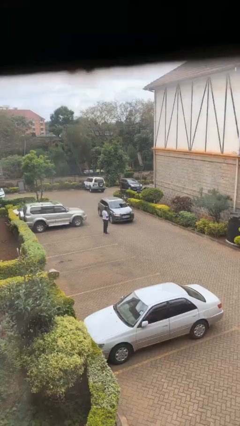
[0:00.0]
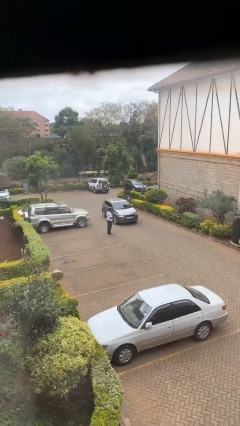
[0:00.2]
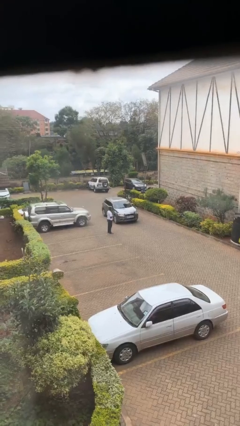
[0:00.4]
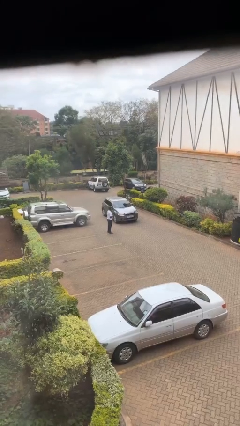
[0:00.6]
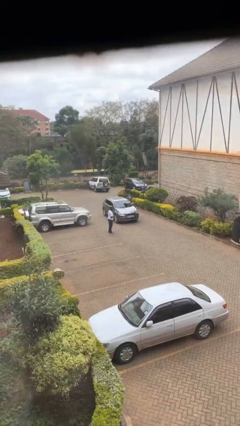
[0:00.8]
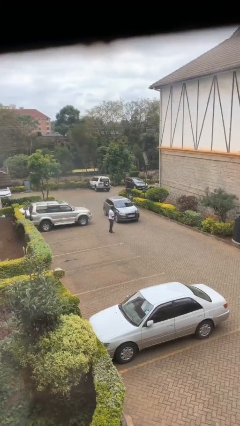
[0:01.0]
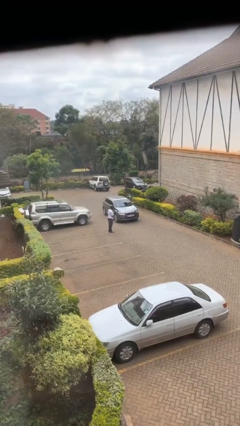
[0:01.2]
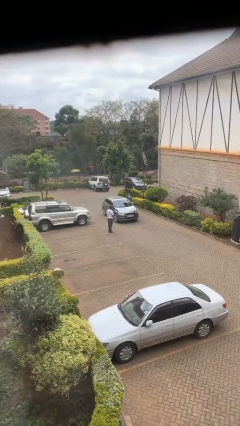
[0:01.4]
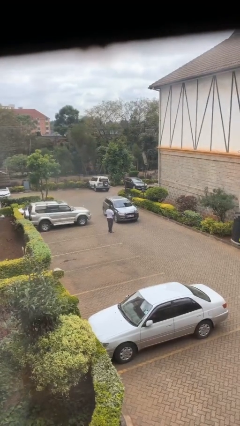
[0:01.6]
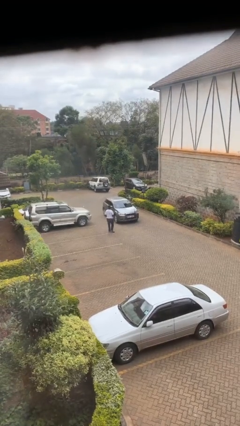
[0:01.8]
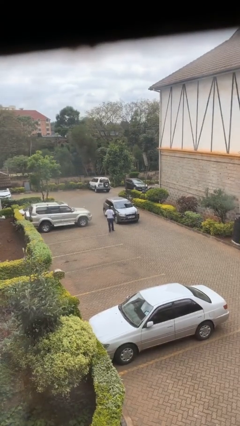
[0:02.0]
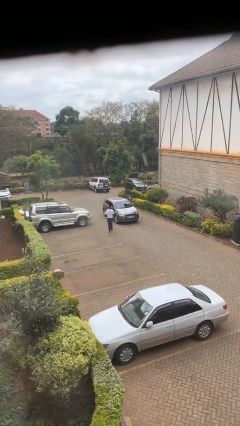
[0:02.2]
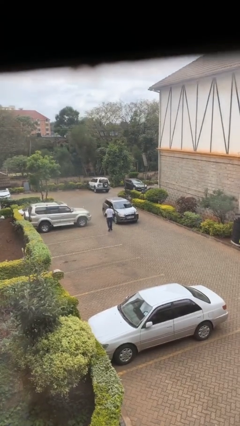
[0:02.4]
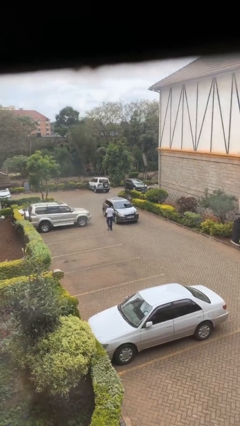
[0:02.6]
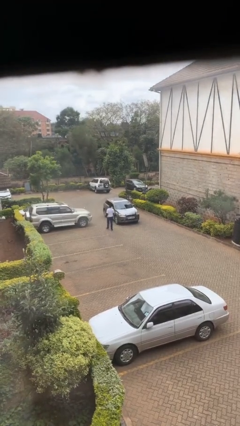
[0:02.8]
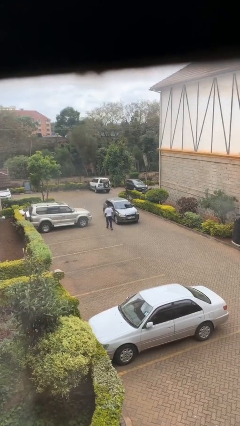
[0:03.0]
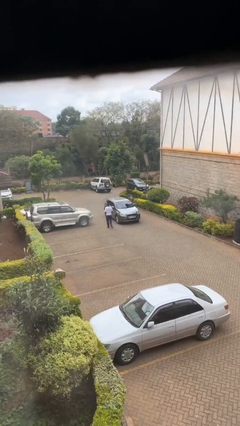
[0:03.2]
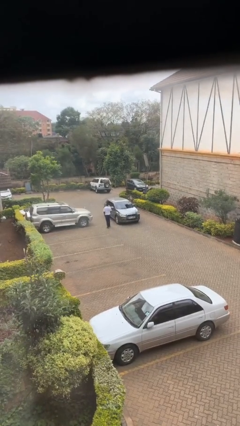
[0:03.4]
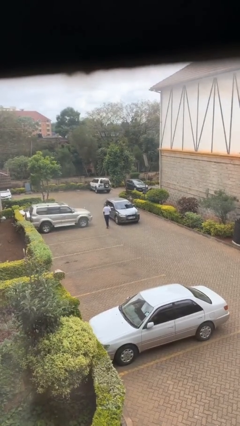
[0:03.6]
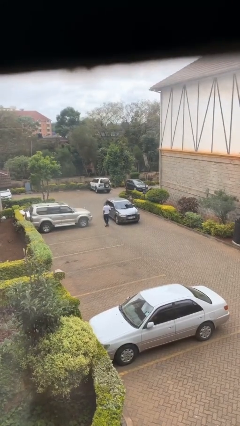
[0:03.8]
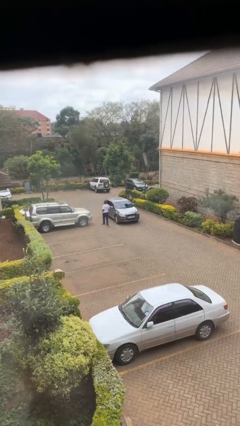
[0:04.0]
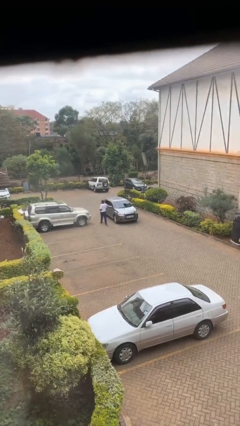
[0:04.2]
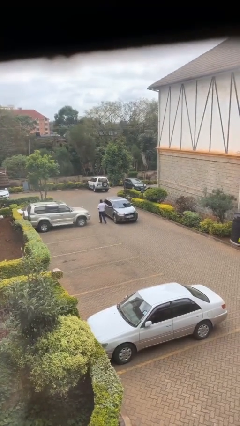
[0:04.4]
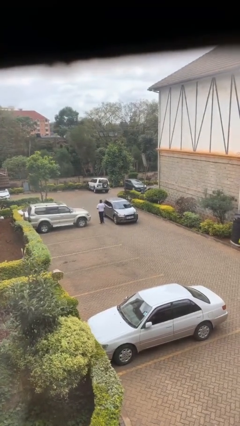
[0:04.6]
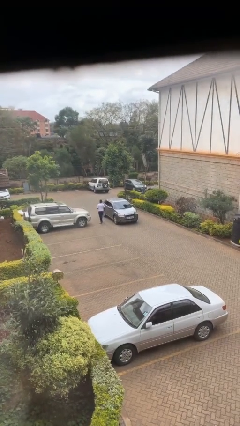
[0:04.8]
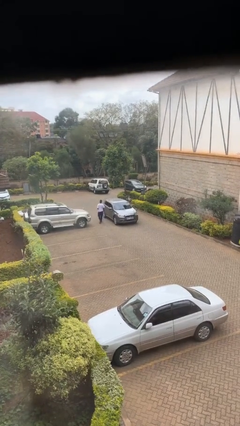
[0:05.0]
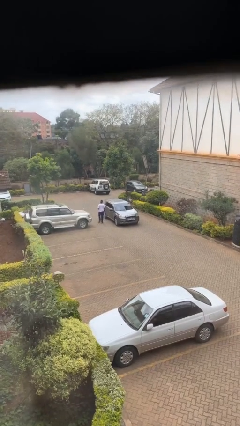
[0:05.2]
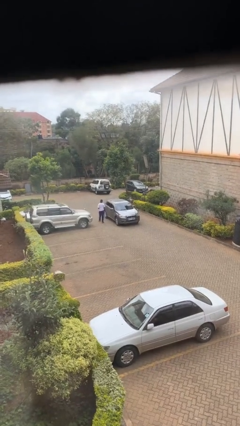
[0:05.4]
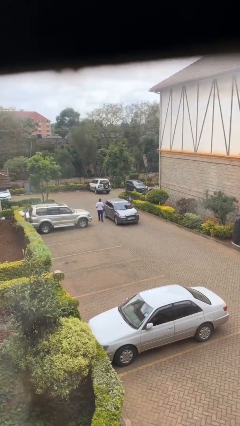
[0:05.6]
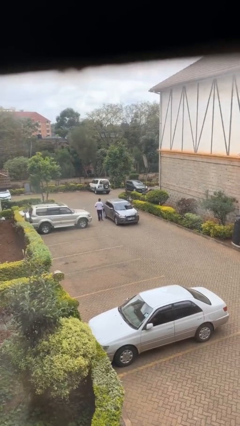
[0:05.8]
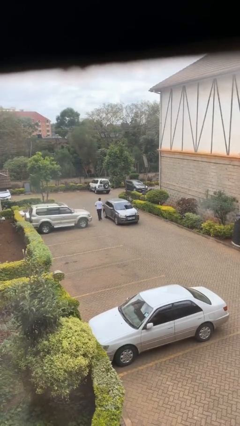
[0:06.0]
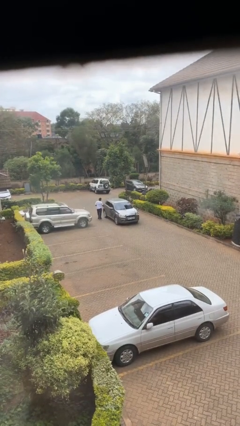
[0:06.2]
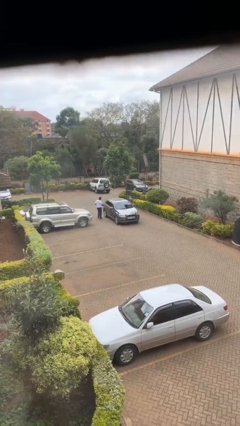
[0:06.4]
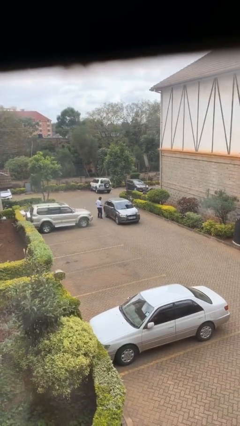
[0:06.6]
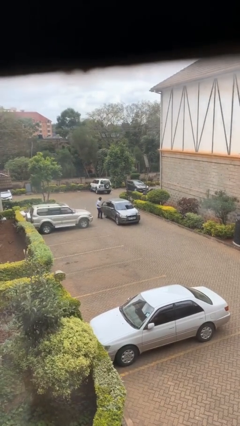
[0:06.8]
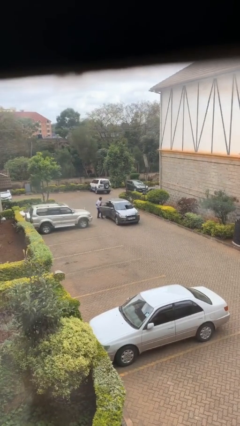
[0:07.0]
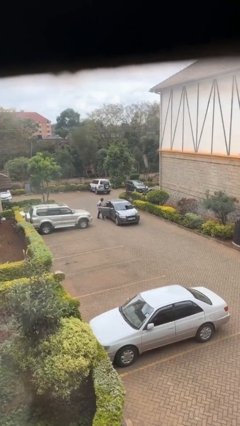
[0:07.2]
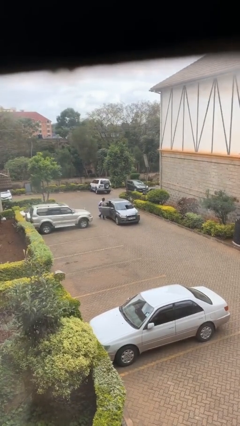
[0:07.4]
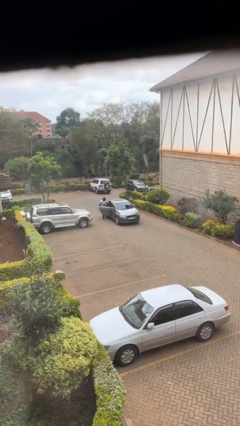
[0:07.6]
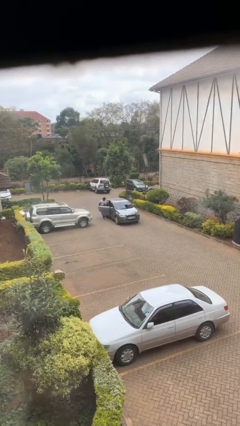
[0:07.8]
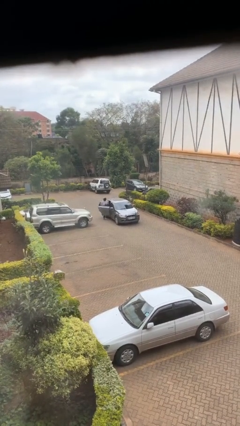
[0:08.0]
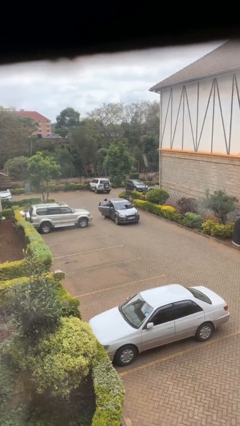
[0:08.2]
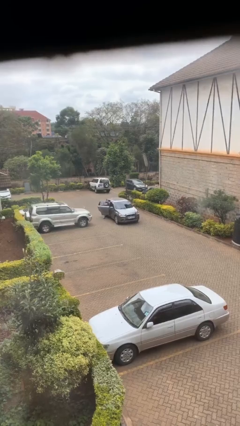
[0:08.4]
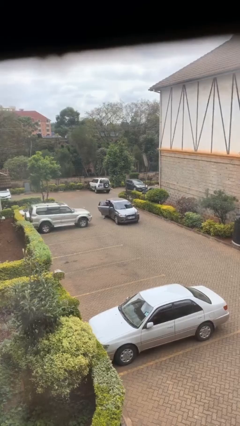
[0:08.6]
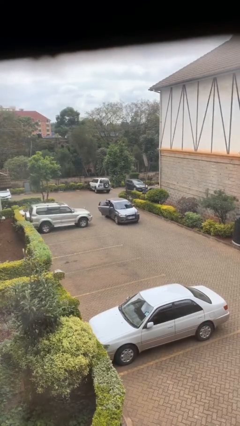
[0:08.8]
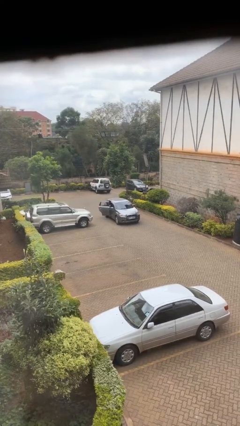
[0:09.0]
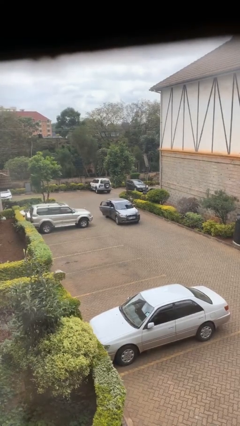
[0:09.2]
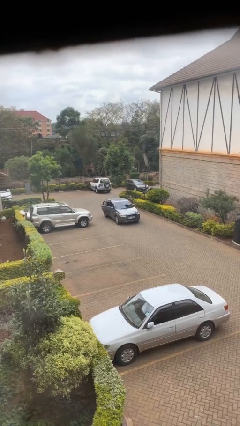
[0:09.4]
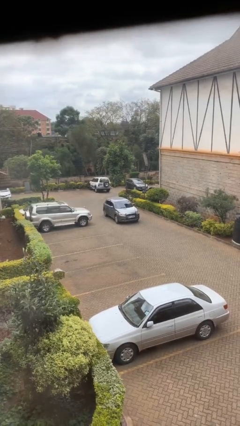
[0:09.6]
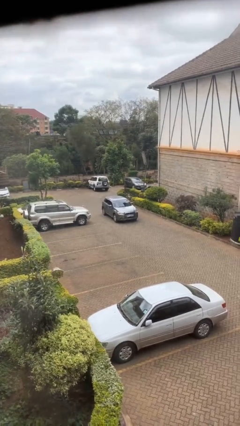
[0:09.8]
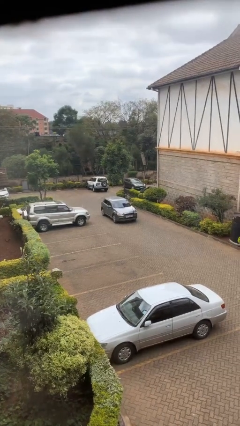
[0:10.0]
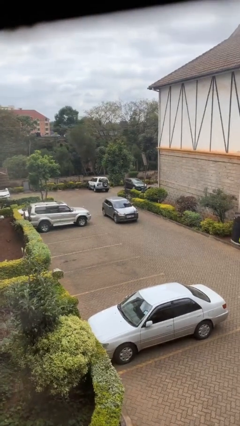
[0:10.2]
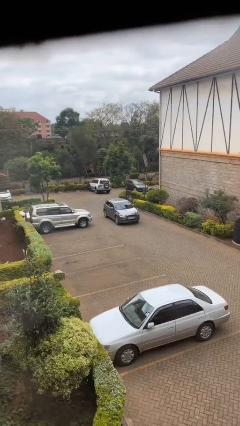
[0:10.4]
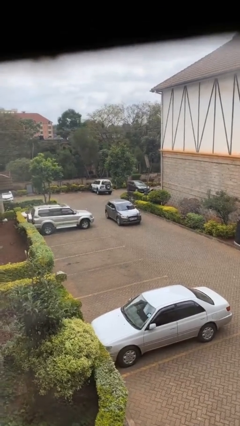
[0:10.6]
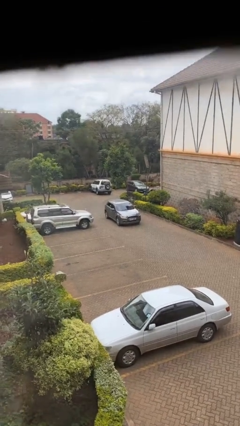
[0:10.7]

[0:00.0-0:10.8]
car picks up person

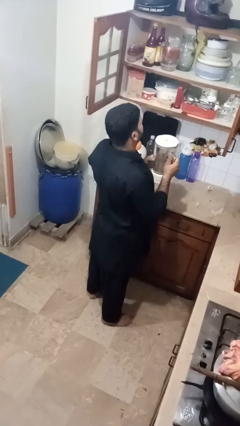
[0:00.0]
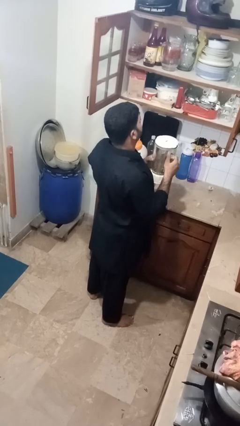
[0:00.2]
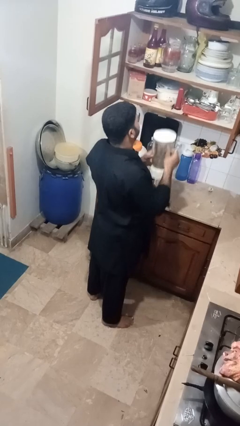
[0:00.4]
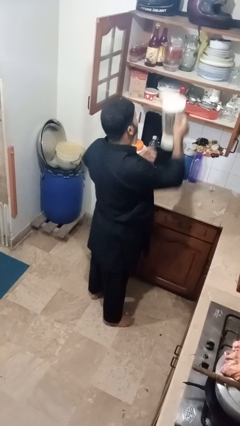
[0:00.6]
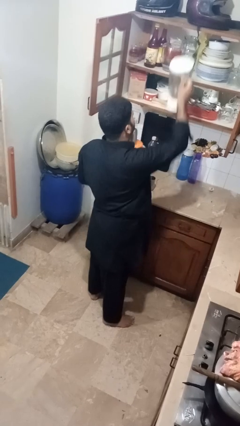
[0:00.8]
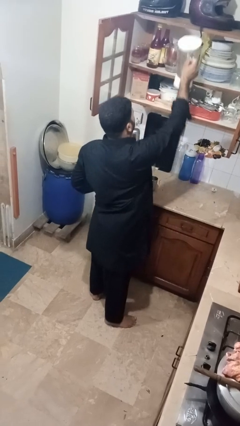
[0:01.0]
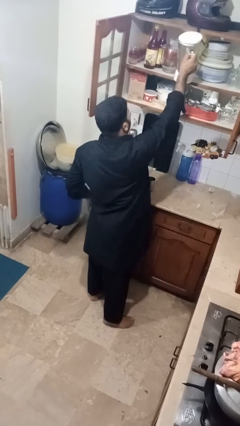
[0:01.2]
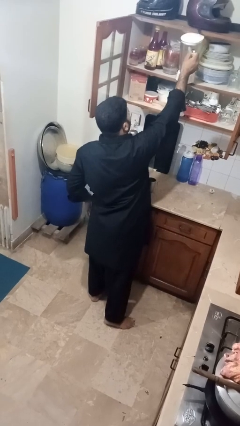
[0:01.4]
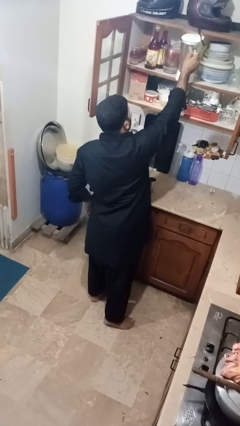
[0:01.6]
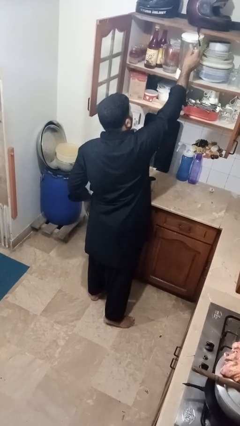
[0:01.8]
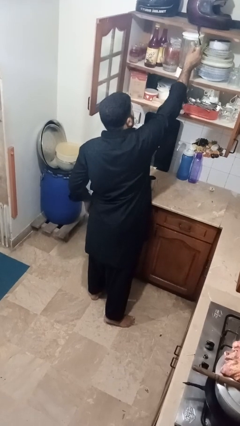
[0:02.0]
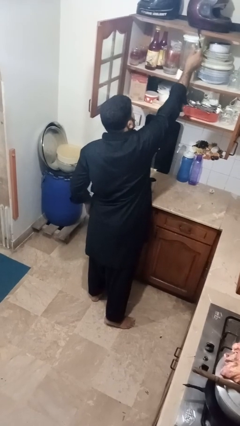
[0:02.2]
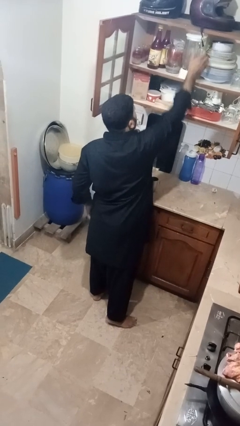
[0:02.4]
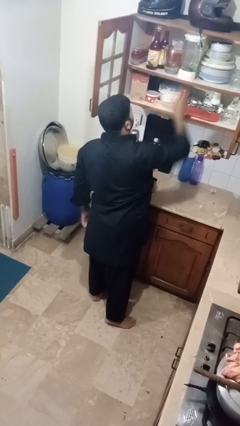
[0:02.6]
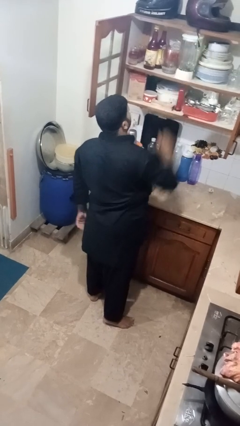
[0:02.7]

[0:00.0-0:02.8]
person puts down object into cabinet

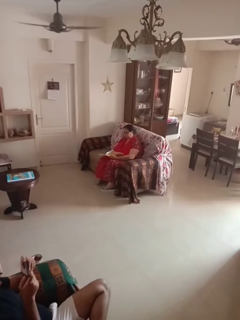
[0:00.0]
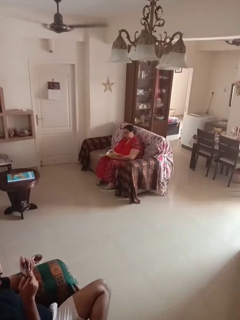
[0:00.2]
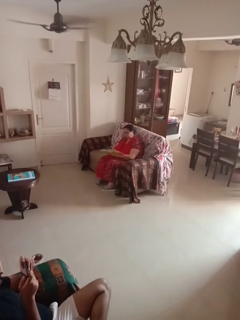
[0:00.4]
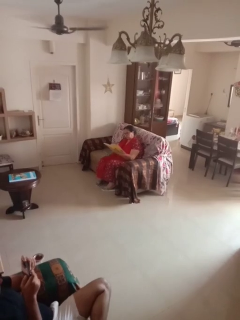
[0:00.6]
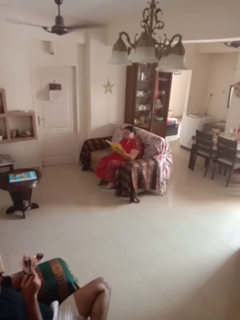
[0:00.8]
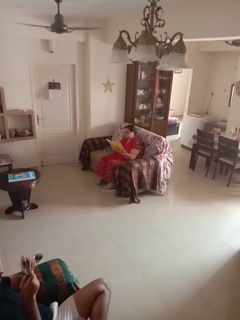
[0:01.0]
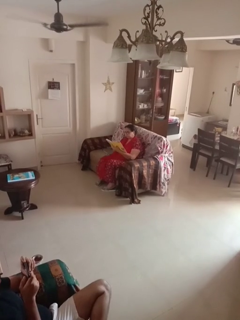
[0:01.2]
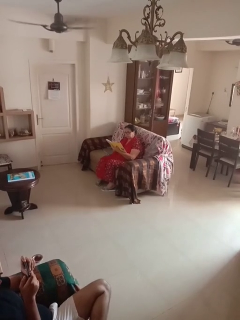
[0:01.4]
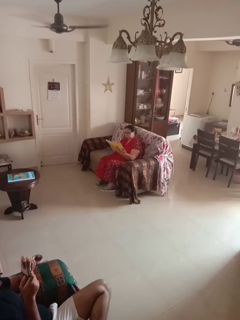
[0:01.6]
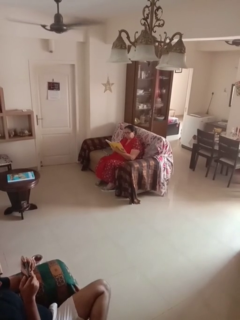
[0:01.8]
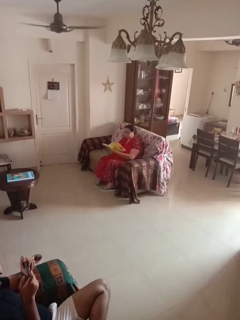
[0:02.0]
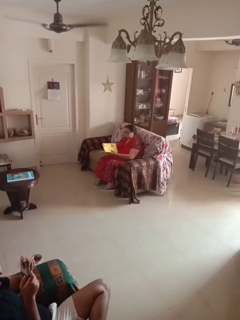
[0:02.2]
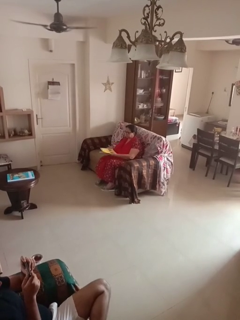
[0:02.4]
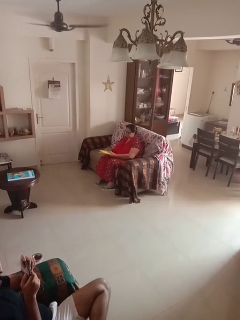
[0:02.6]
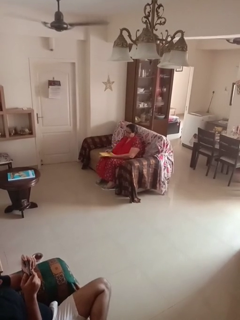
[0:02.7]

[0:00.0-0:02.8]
person reads document

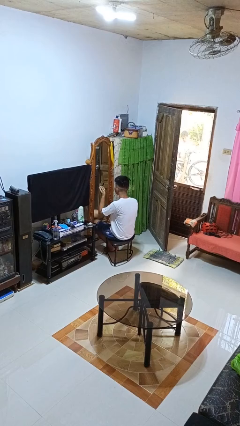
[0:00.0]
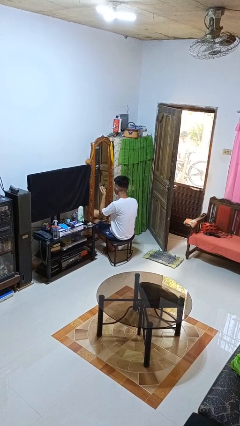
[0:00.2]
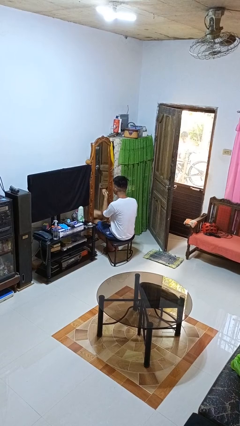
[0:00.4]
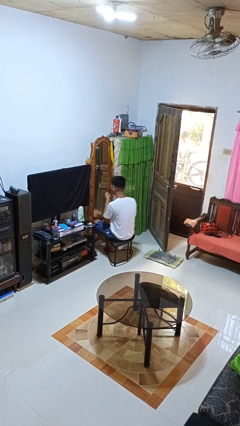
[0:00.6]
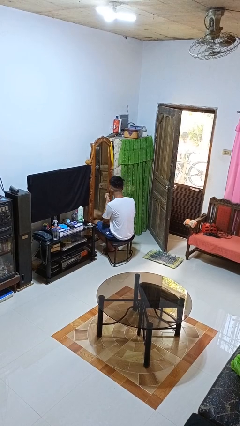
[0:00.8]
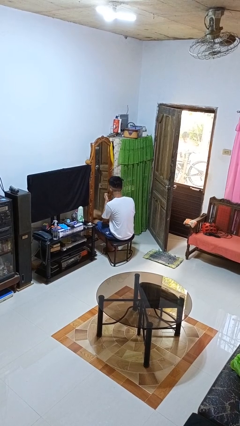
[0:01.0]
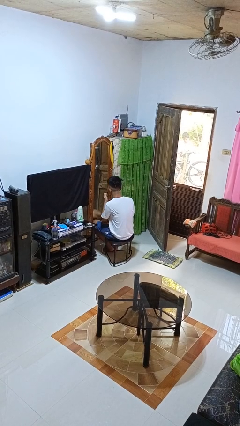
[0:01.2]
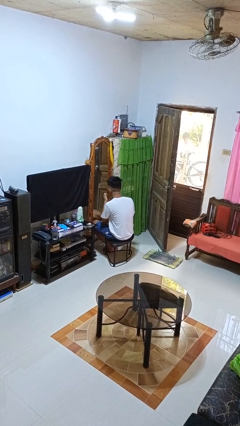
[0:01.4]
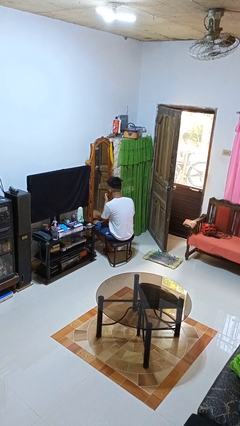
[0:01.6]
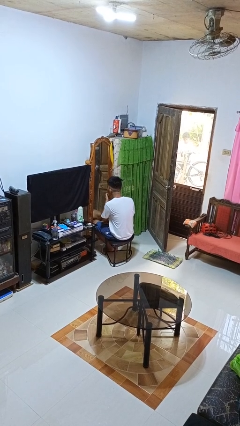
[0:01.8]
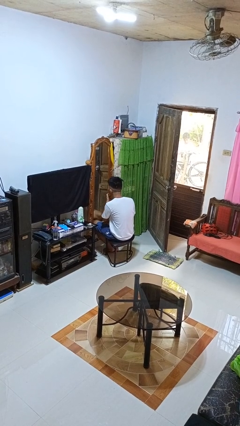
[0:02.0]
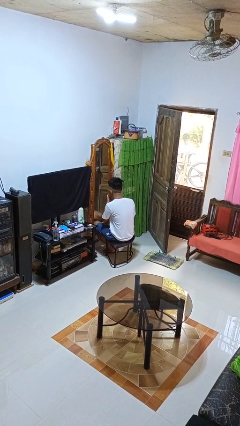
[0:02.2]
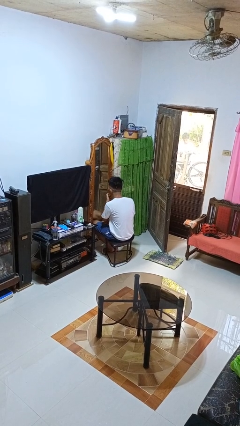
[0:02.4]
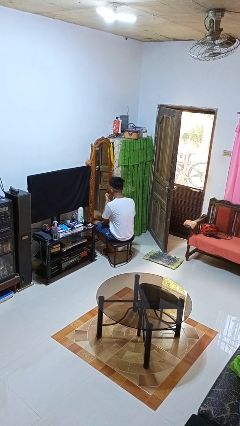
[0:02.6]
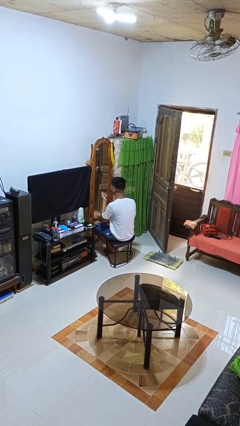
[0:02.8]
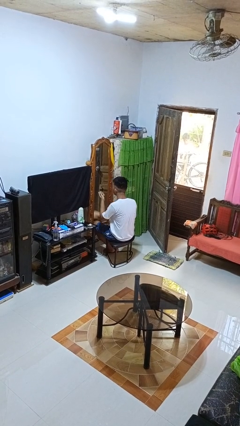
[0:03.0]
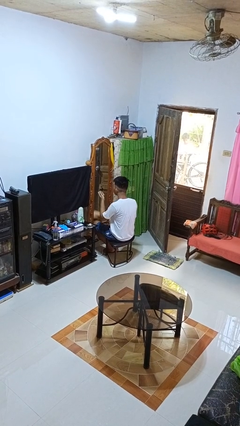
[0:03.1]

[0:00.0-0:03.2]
person applies lip makeup
